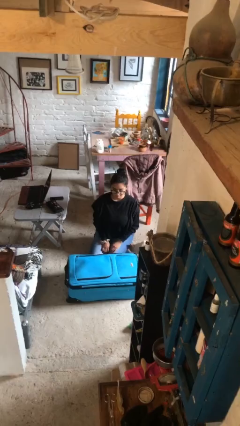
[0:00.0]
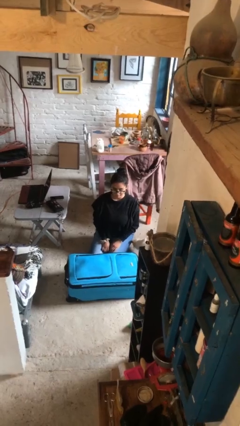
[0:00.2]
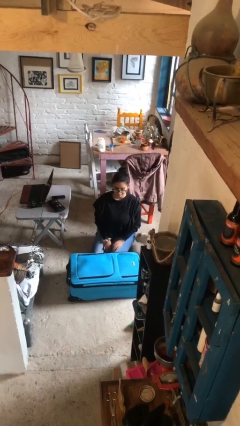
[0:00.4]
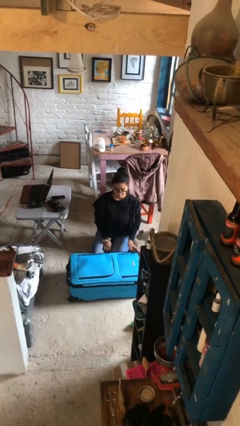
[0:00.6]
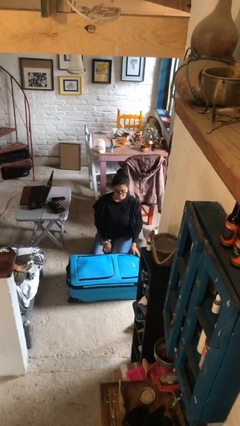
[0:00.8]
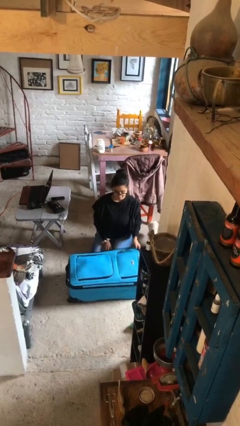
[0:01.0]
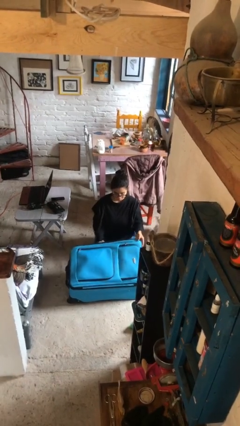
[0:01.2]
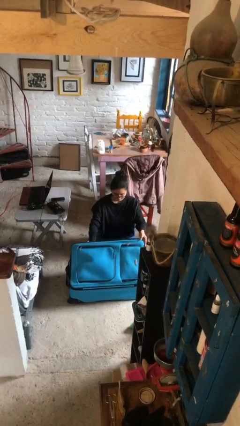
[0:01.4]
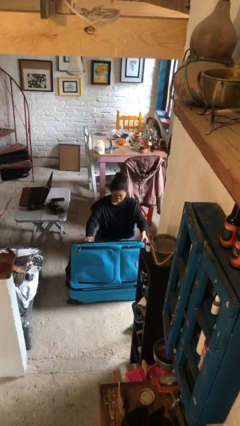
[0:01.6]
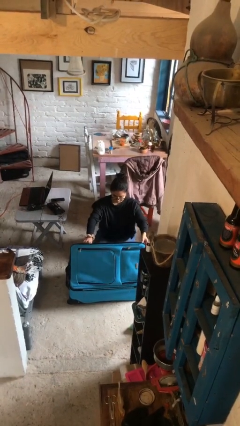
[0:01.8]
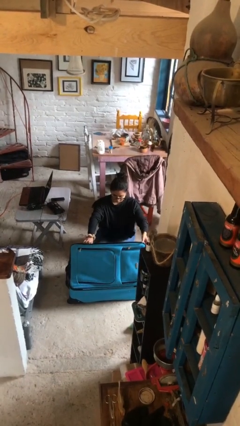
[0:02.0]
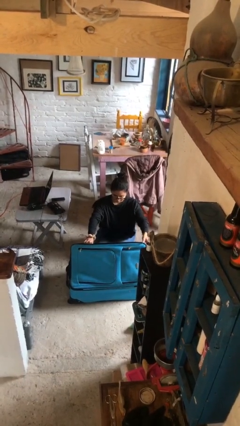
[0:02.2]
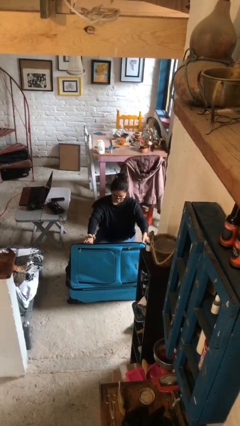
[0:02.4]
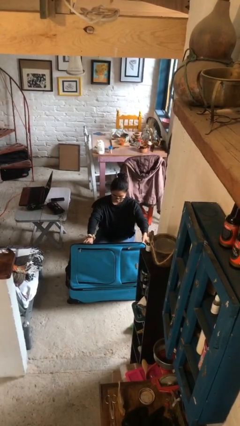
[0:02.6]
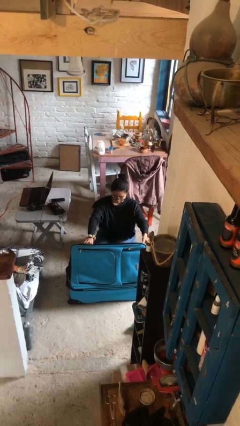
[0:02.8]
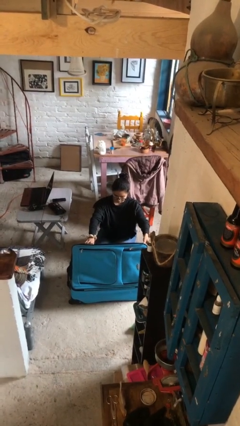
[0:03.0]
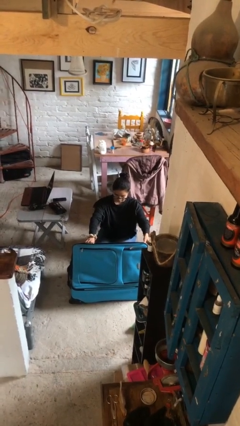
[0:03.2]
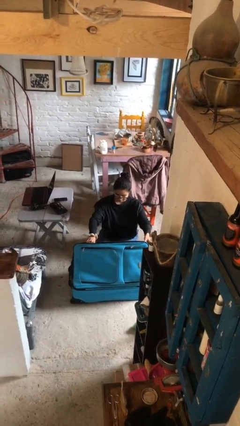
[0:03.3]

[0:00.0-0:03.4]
person opens suitcase

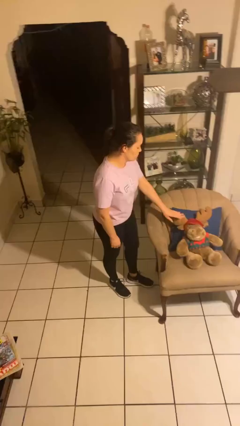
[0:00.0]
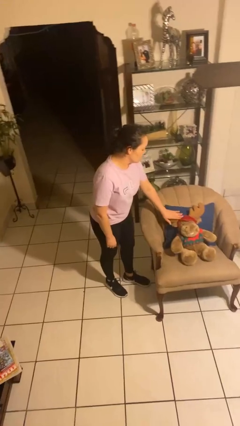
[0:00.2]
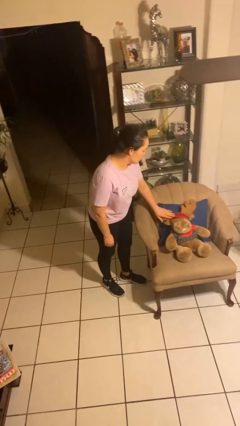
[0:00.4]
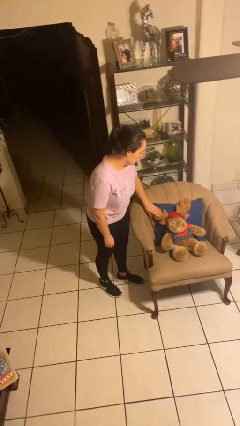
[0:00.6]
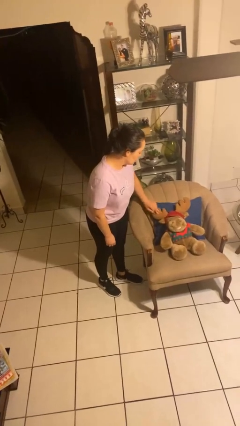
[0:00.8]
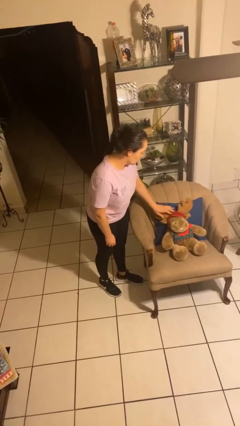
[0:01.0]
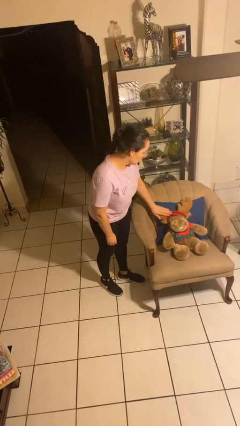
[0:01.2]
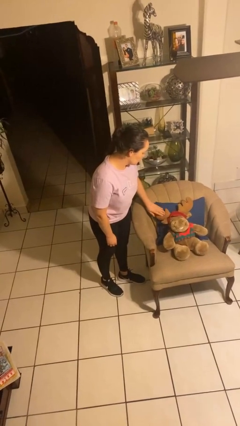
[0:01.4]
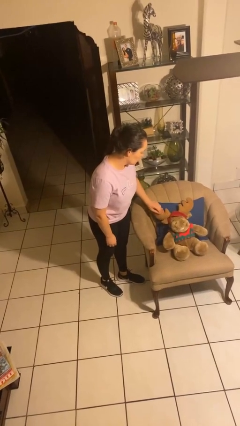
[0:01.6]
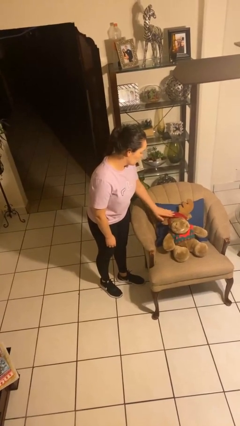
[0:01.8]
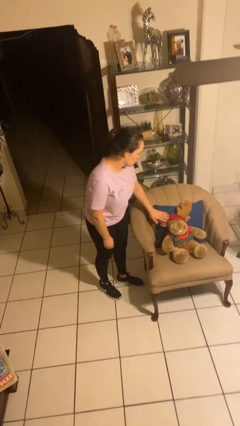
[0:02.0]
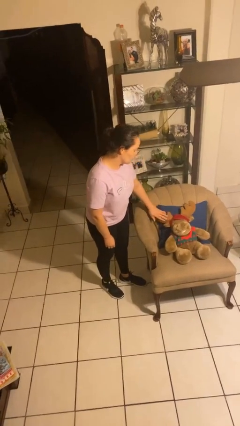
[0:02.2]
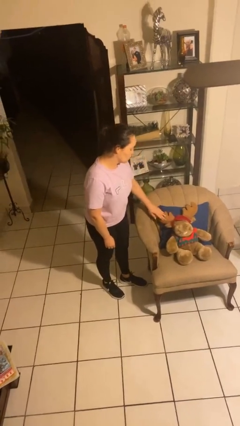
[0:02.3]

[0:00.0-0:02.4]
person waves hand over object

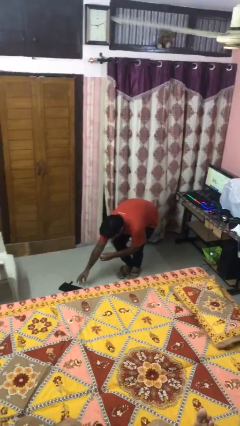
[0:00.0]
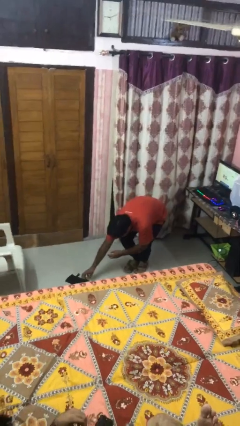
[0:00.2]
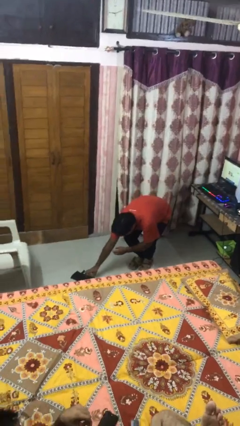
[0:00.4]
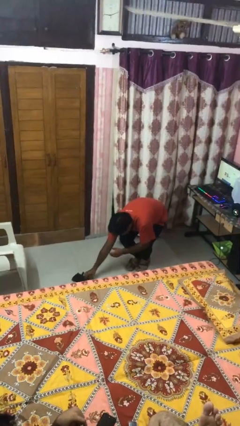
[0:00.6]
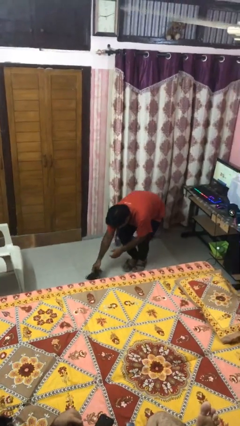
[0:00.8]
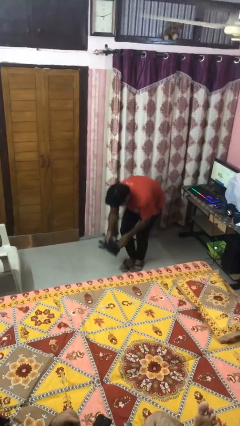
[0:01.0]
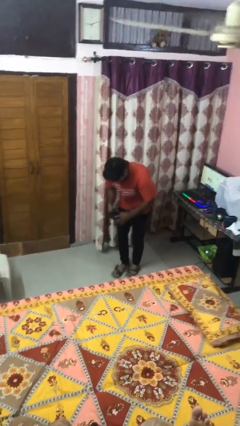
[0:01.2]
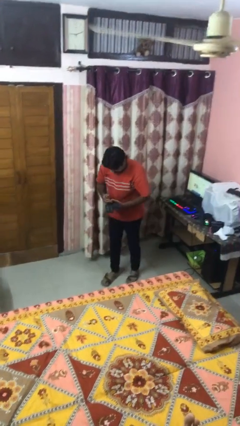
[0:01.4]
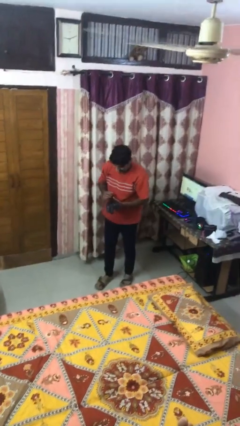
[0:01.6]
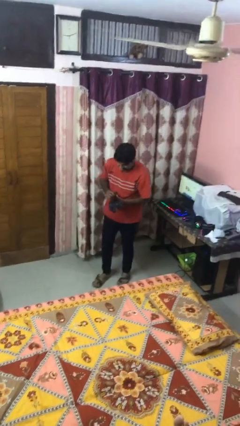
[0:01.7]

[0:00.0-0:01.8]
person picks up object from floor

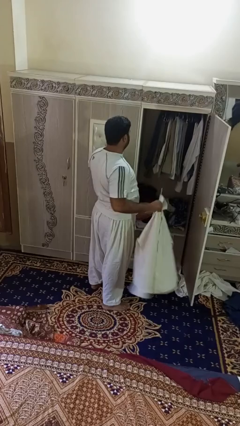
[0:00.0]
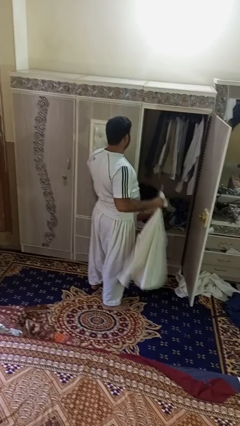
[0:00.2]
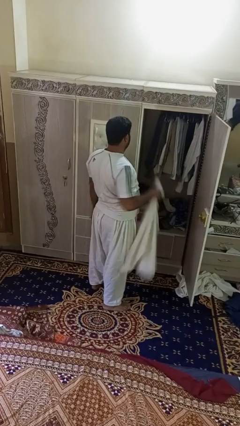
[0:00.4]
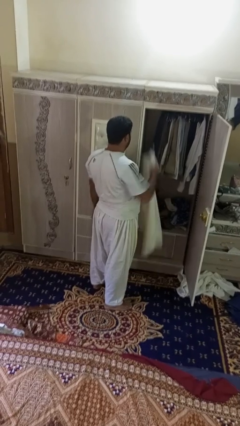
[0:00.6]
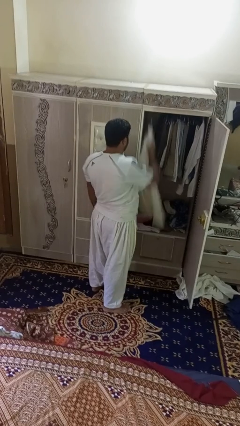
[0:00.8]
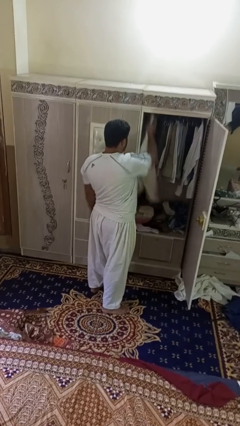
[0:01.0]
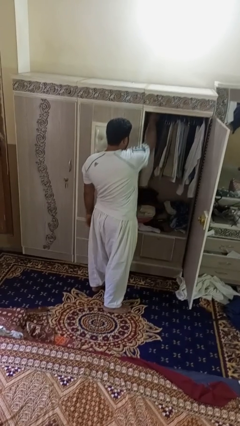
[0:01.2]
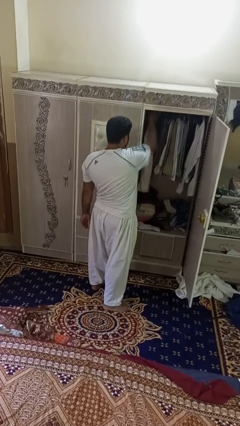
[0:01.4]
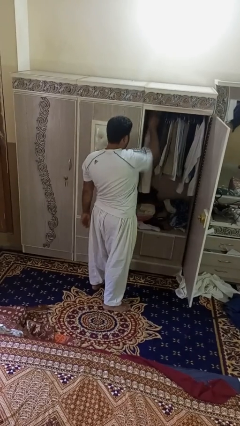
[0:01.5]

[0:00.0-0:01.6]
person puts clothes into closet

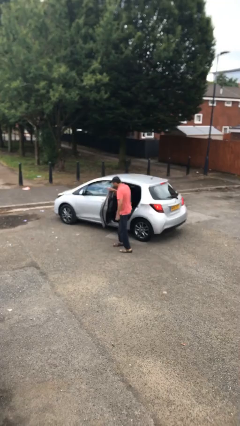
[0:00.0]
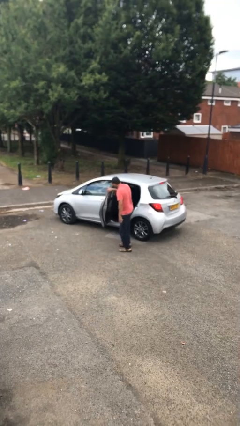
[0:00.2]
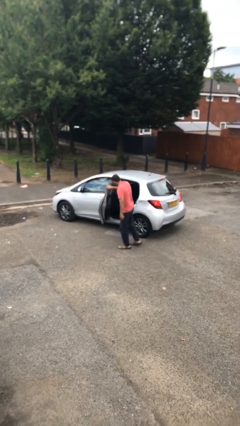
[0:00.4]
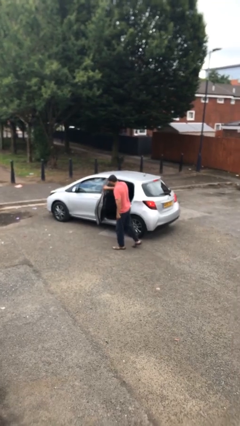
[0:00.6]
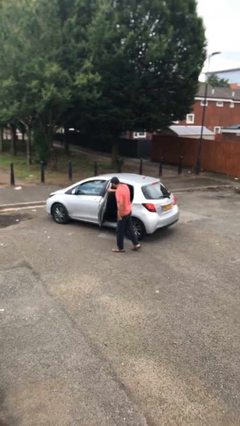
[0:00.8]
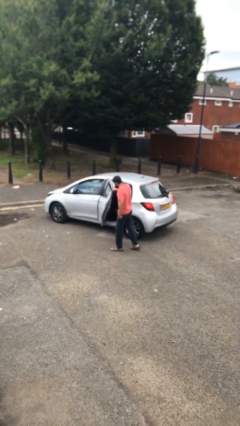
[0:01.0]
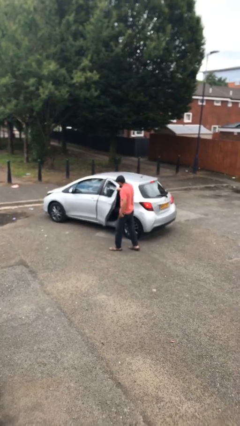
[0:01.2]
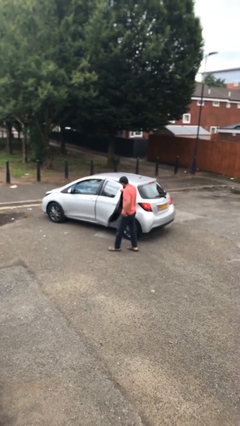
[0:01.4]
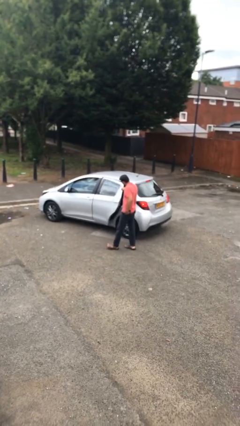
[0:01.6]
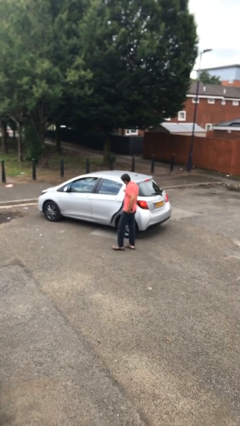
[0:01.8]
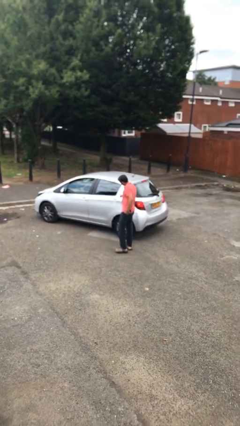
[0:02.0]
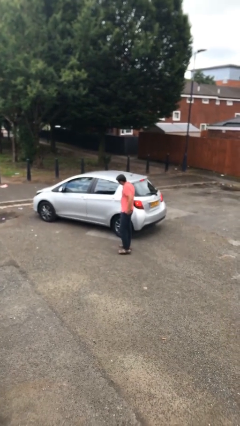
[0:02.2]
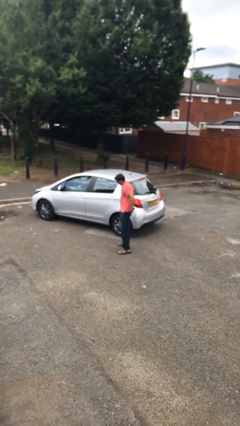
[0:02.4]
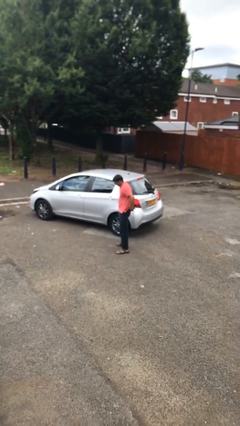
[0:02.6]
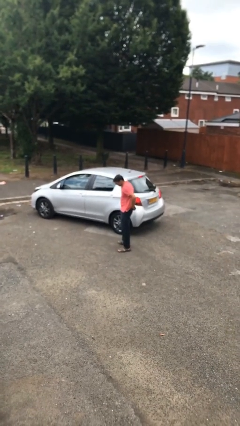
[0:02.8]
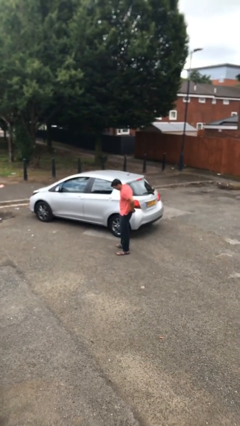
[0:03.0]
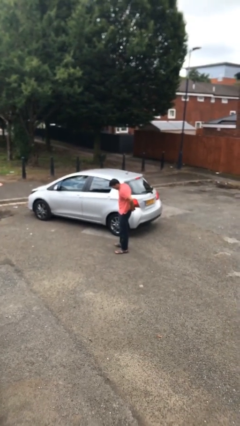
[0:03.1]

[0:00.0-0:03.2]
person closes car door

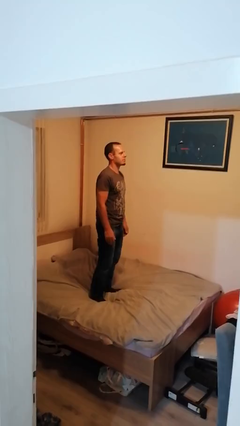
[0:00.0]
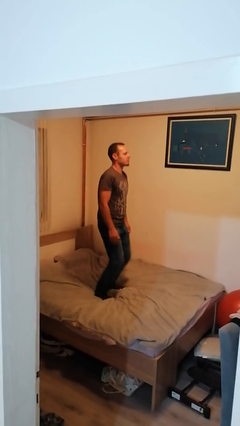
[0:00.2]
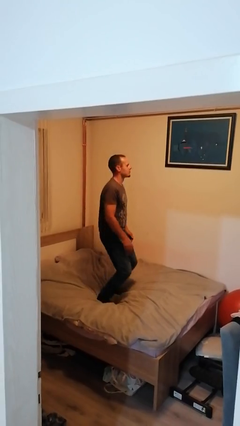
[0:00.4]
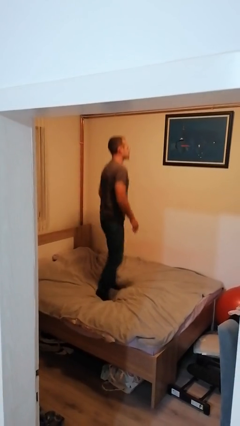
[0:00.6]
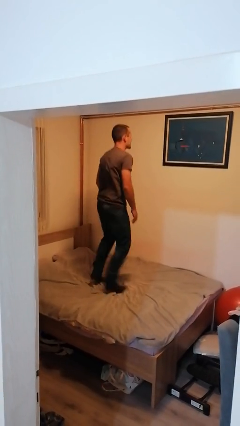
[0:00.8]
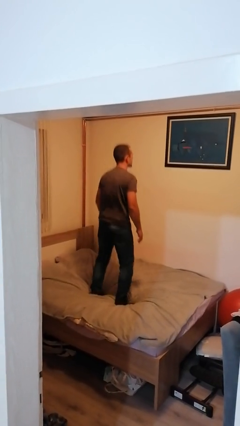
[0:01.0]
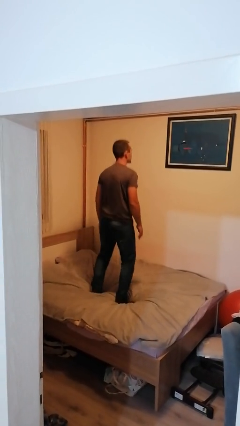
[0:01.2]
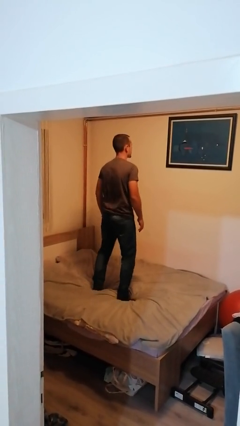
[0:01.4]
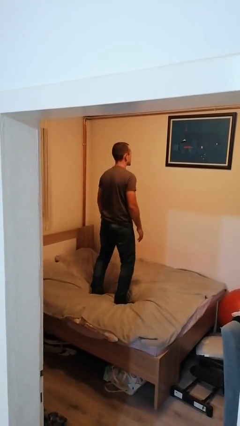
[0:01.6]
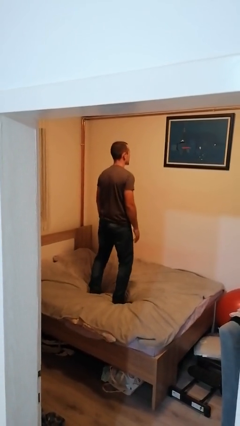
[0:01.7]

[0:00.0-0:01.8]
person jumps on bed

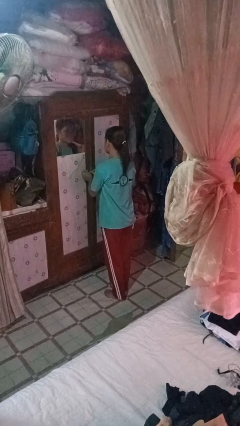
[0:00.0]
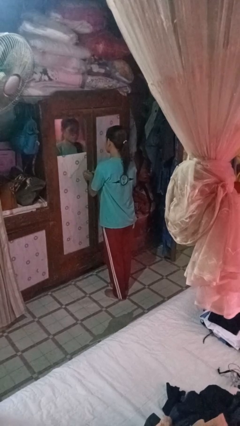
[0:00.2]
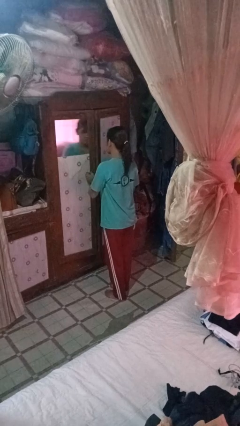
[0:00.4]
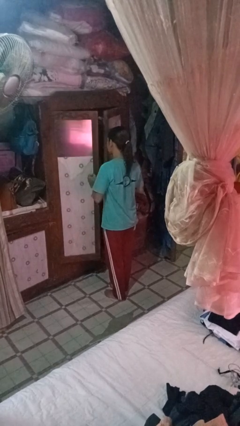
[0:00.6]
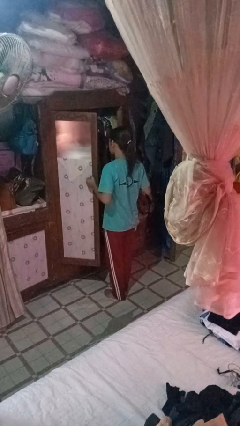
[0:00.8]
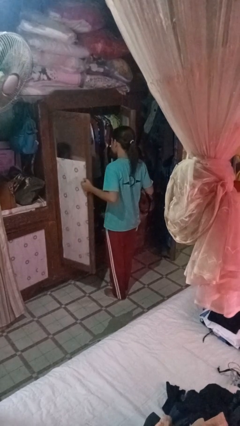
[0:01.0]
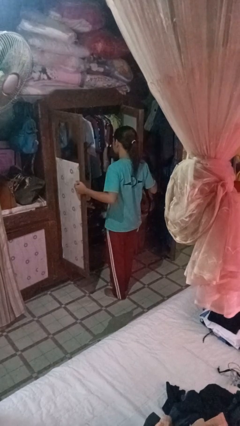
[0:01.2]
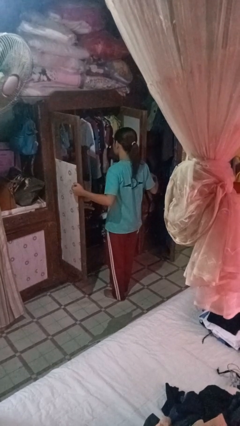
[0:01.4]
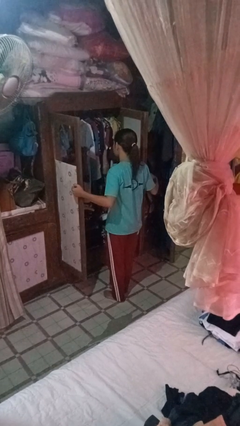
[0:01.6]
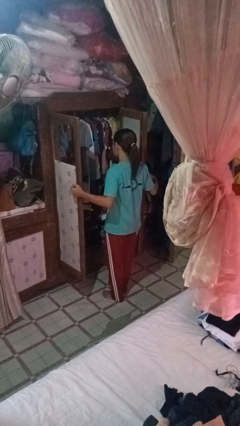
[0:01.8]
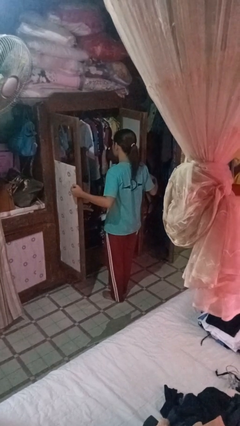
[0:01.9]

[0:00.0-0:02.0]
person opens closet door

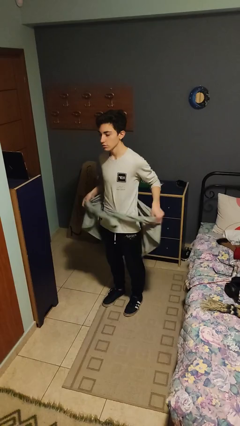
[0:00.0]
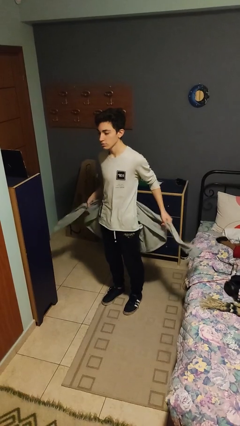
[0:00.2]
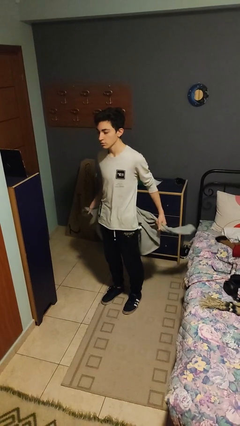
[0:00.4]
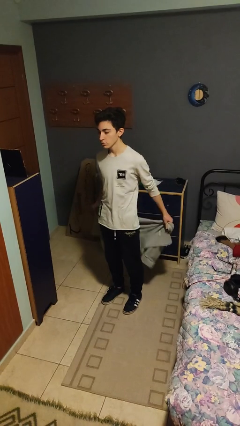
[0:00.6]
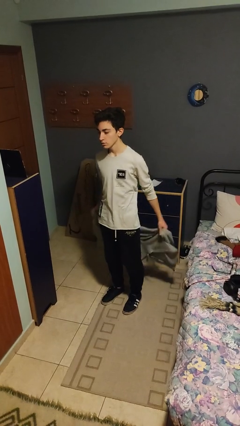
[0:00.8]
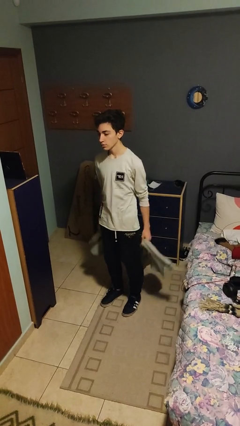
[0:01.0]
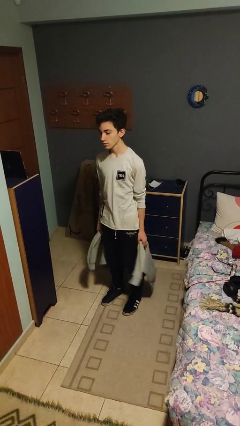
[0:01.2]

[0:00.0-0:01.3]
person unties jacket around waist
